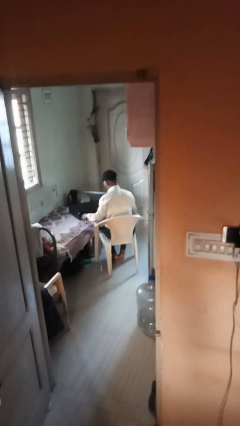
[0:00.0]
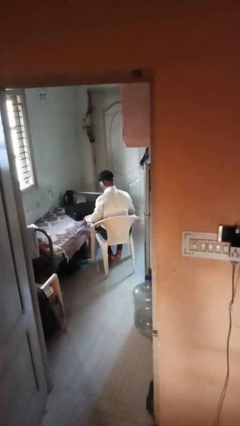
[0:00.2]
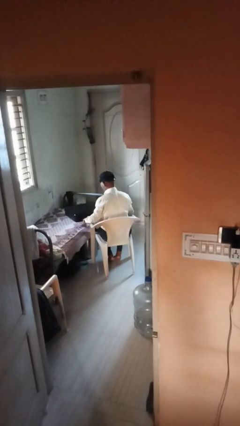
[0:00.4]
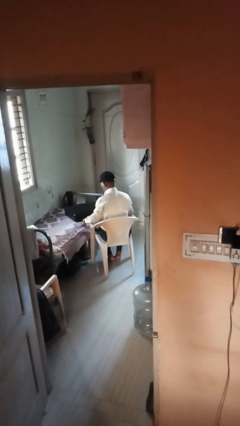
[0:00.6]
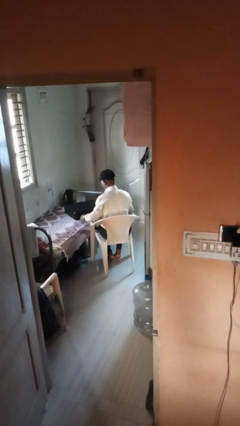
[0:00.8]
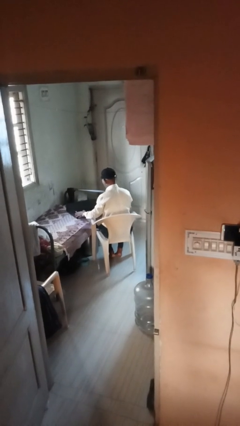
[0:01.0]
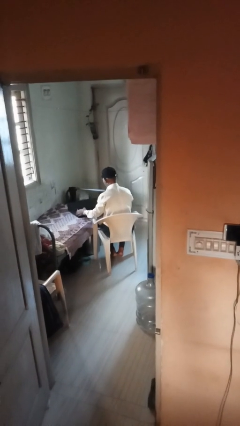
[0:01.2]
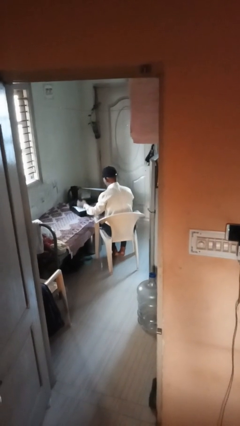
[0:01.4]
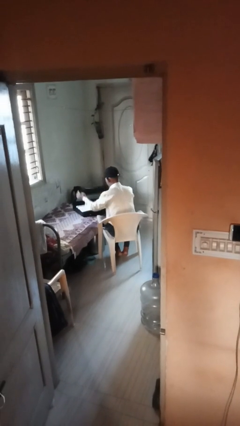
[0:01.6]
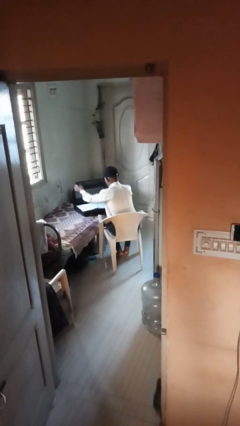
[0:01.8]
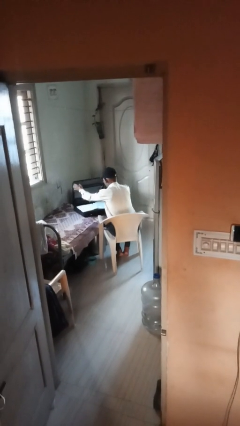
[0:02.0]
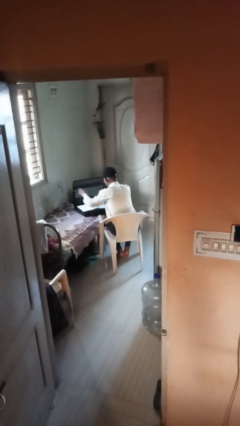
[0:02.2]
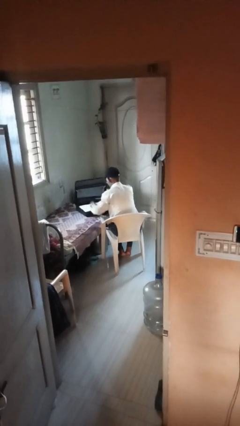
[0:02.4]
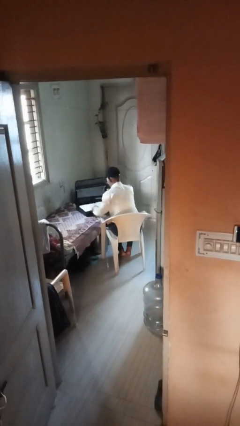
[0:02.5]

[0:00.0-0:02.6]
person opens suitcase

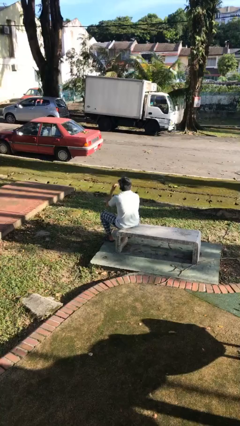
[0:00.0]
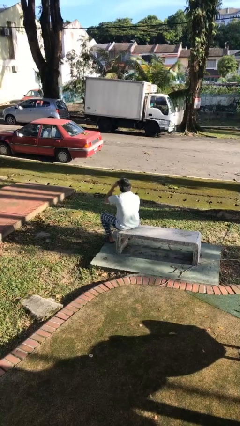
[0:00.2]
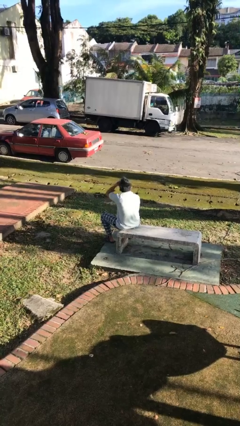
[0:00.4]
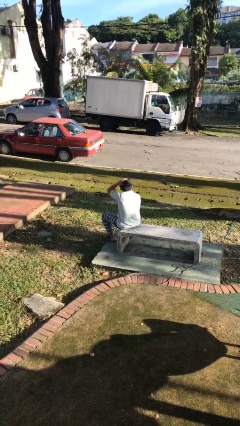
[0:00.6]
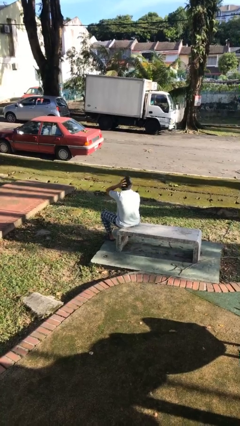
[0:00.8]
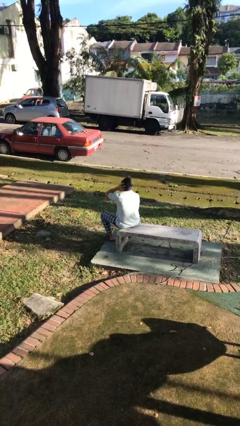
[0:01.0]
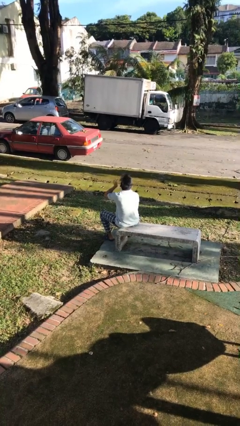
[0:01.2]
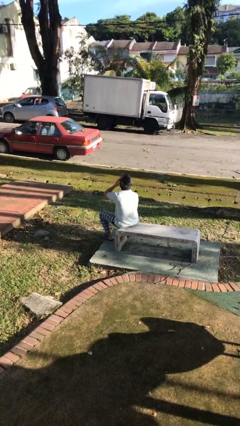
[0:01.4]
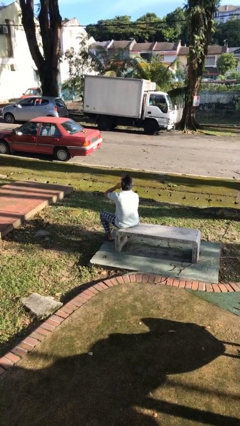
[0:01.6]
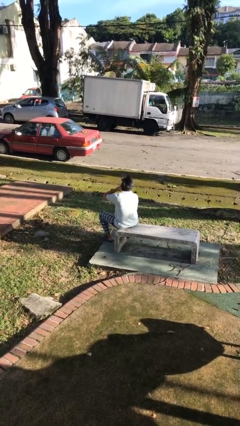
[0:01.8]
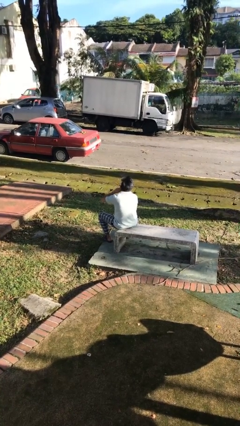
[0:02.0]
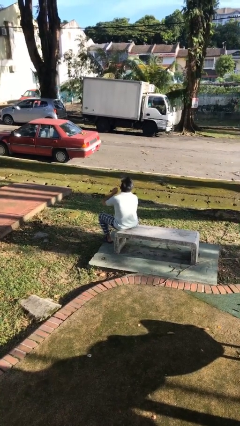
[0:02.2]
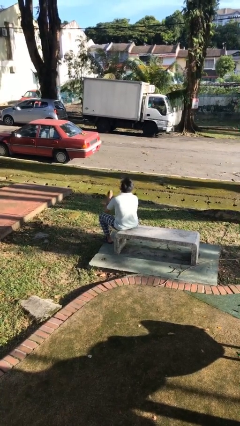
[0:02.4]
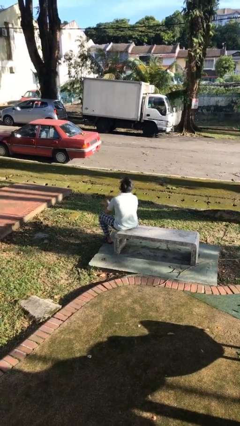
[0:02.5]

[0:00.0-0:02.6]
person strokes hair

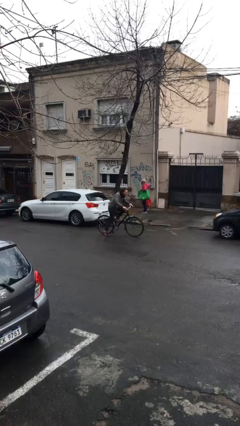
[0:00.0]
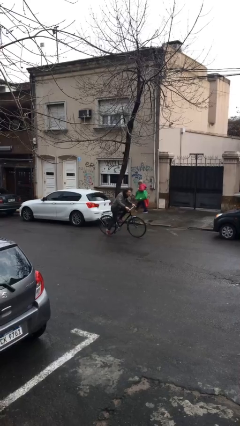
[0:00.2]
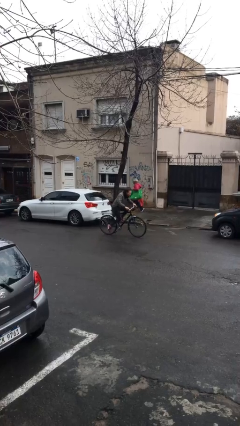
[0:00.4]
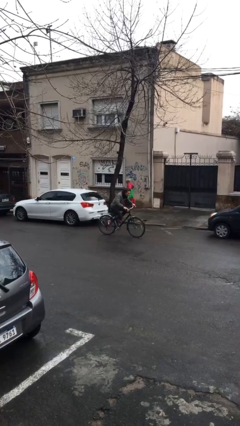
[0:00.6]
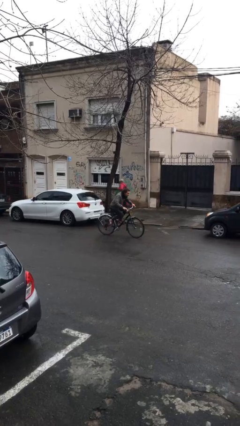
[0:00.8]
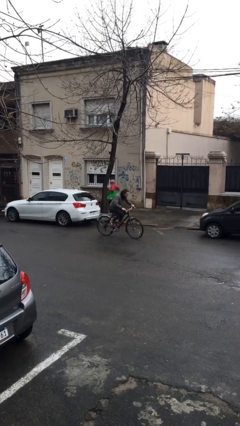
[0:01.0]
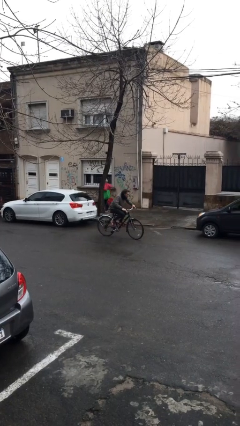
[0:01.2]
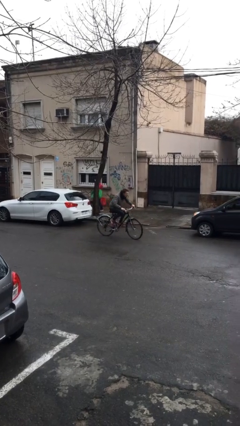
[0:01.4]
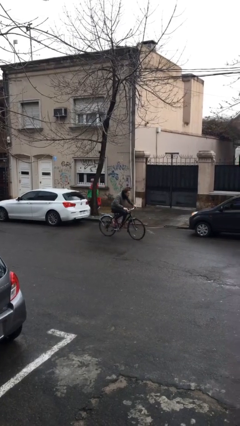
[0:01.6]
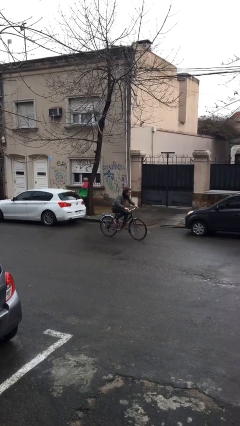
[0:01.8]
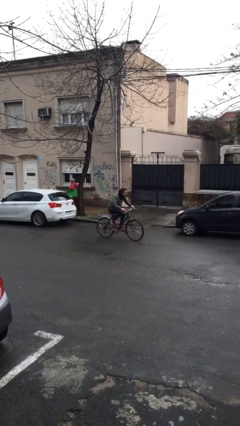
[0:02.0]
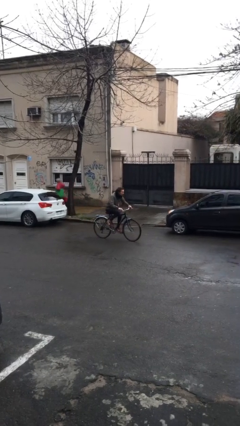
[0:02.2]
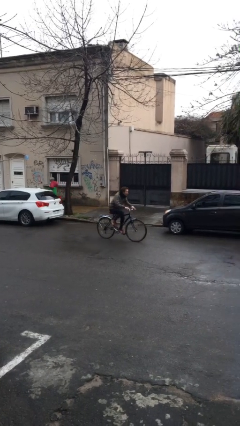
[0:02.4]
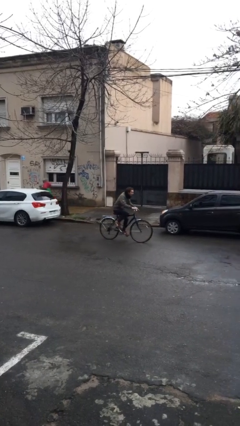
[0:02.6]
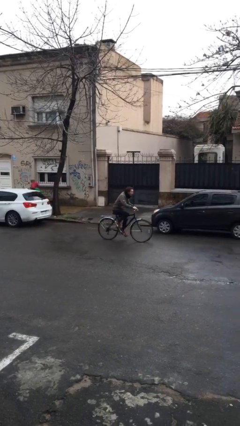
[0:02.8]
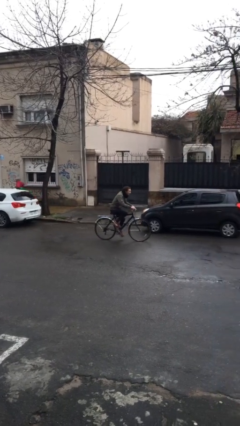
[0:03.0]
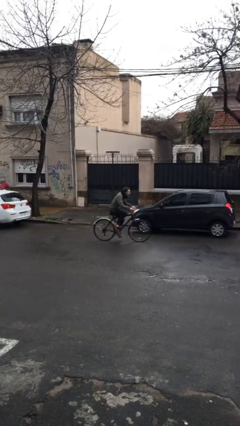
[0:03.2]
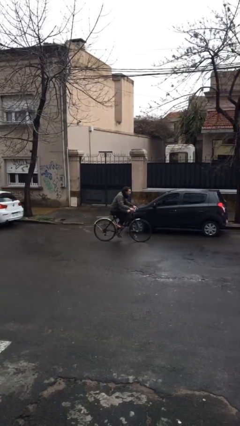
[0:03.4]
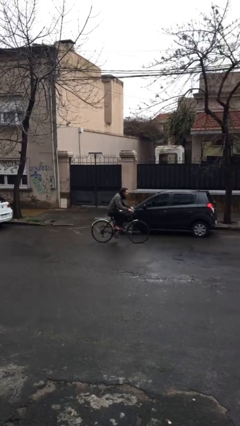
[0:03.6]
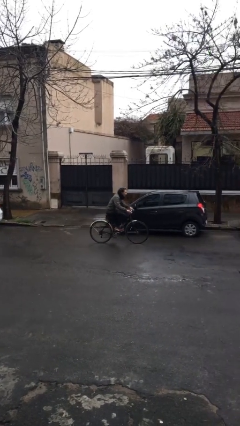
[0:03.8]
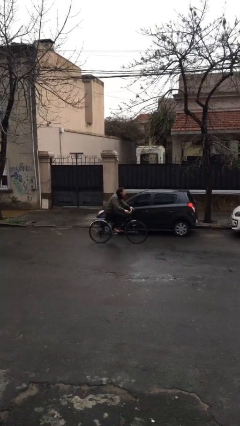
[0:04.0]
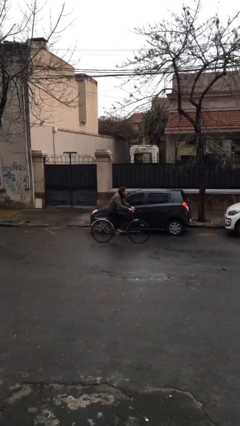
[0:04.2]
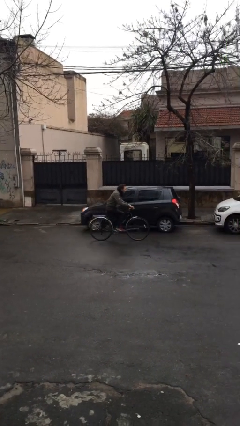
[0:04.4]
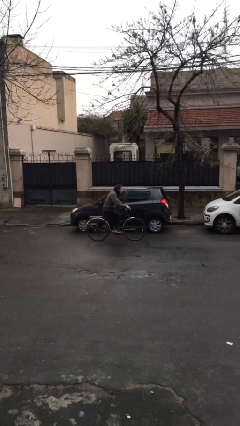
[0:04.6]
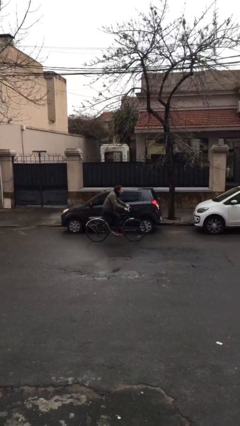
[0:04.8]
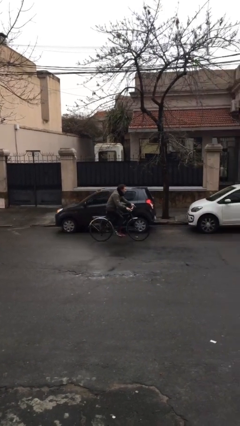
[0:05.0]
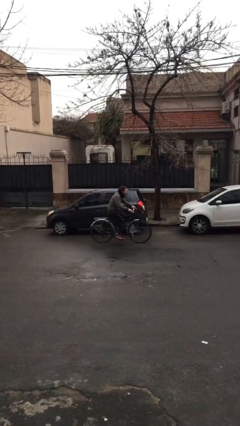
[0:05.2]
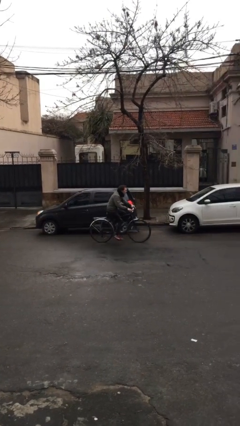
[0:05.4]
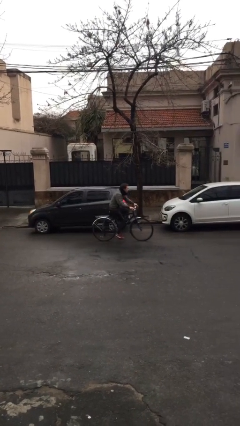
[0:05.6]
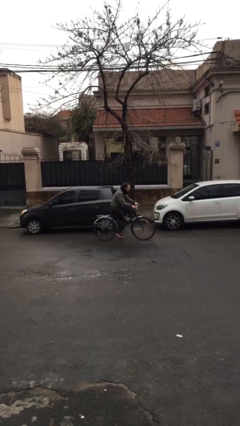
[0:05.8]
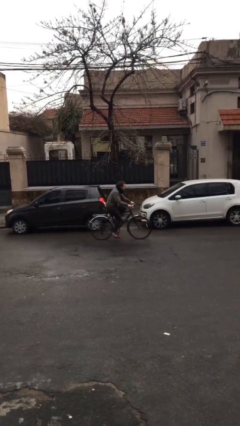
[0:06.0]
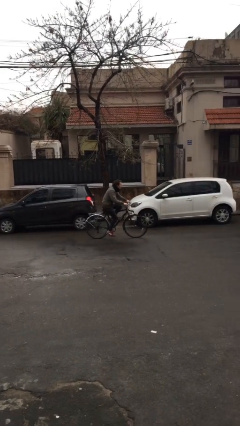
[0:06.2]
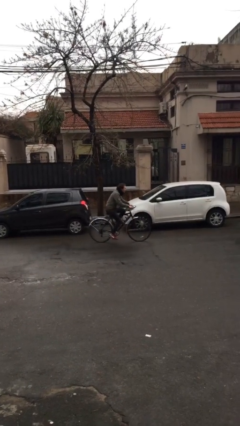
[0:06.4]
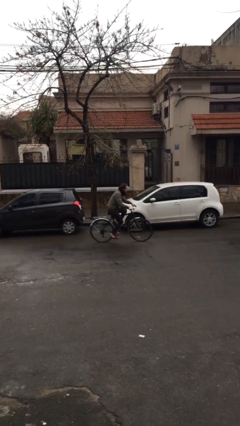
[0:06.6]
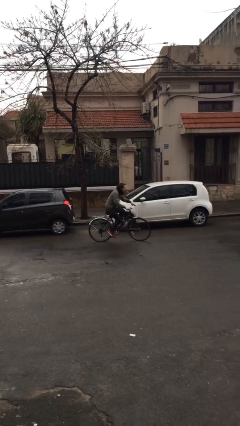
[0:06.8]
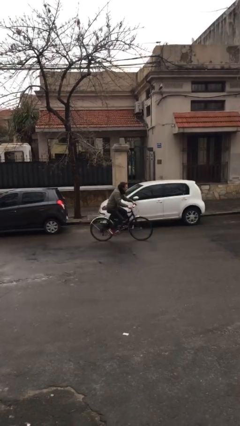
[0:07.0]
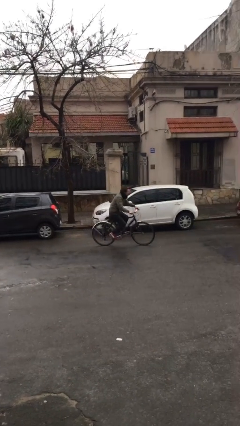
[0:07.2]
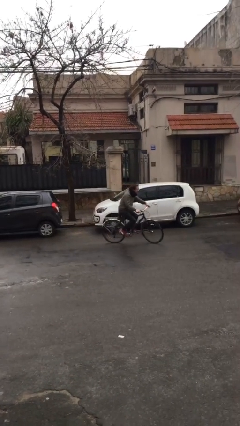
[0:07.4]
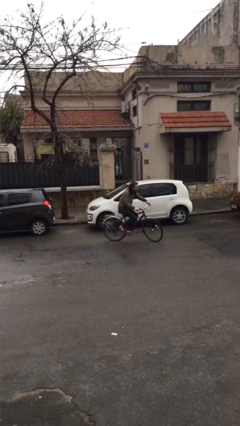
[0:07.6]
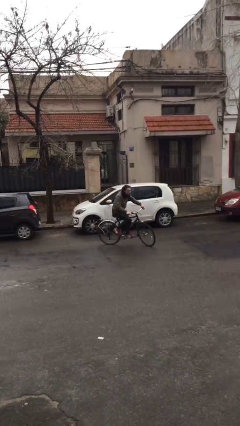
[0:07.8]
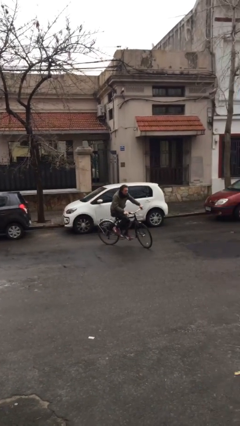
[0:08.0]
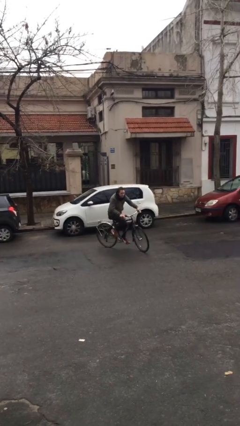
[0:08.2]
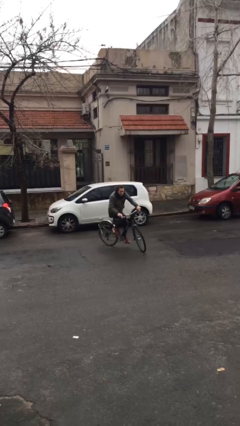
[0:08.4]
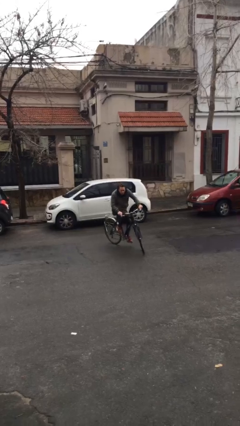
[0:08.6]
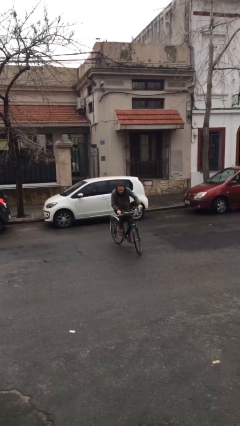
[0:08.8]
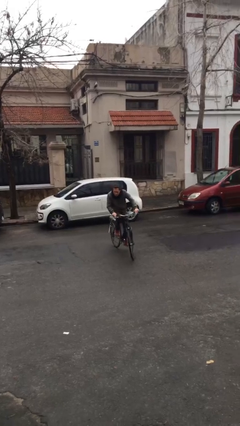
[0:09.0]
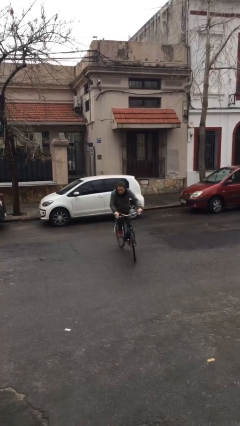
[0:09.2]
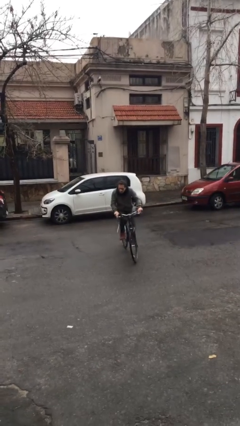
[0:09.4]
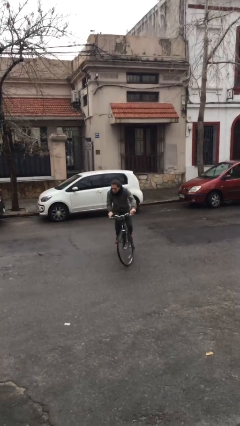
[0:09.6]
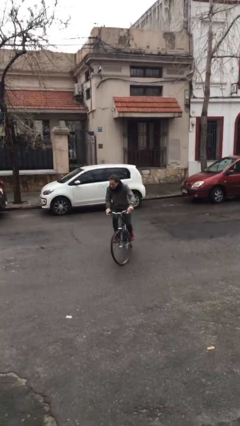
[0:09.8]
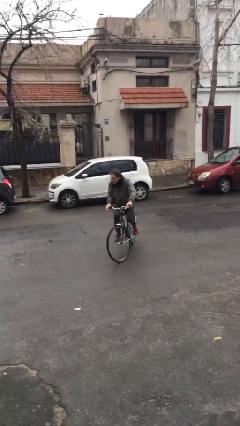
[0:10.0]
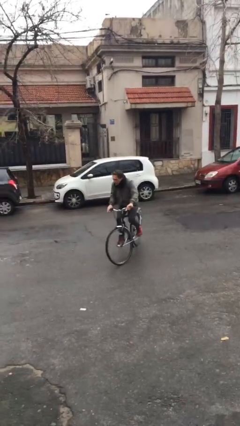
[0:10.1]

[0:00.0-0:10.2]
person rides bicycle

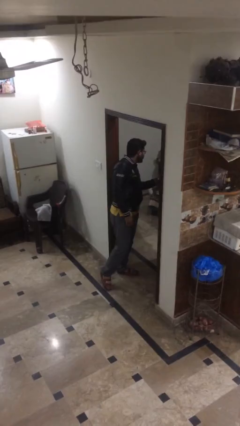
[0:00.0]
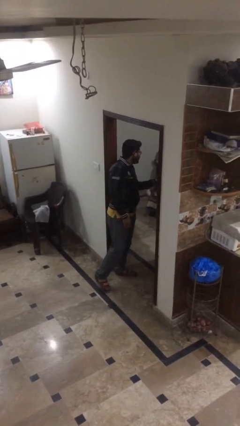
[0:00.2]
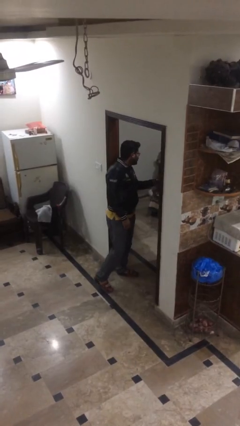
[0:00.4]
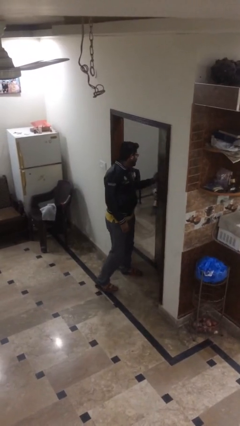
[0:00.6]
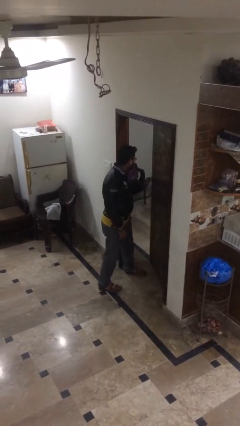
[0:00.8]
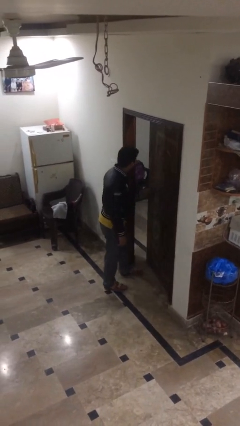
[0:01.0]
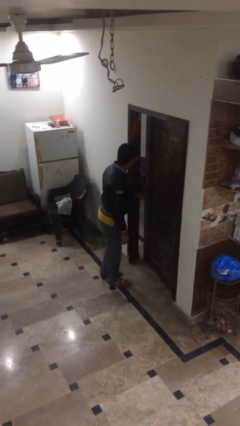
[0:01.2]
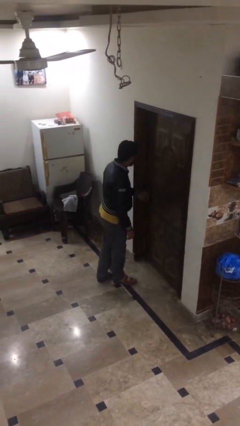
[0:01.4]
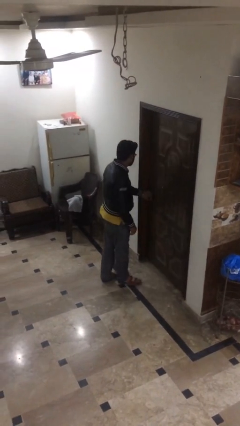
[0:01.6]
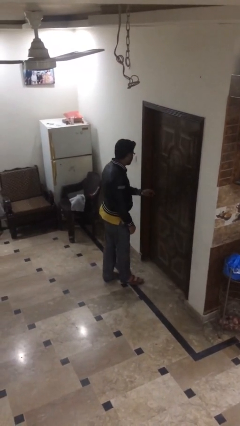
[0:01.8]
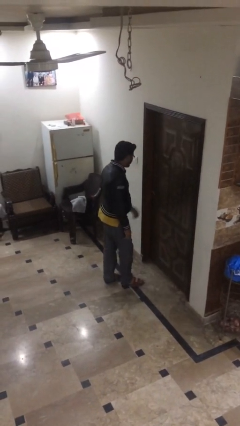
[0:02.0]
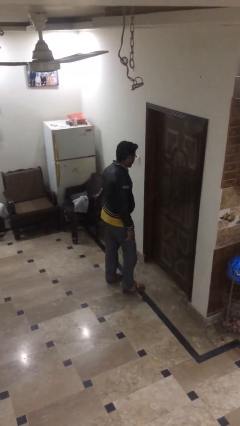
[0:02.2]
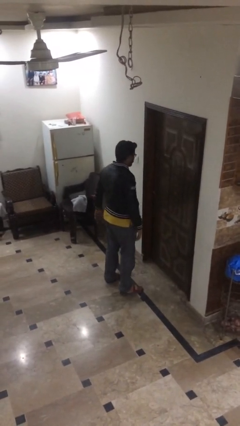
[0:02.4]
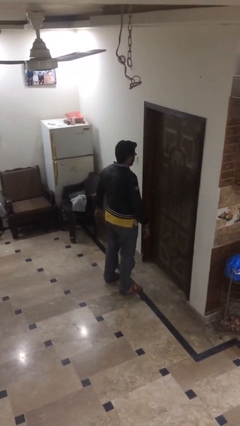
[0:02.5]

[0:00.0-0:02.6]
person closes facility door
